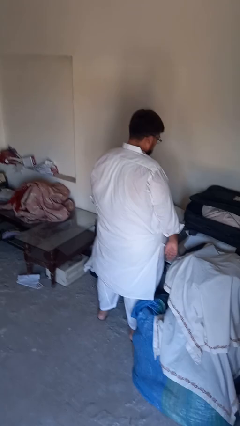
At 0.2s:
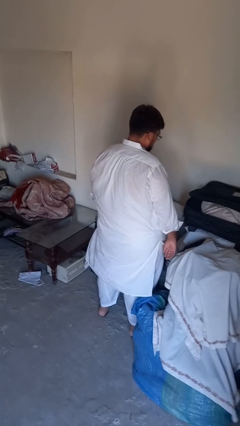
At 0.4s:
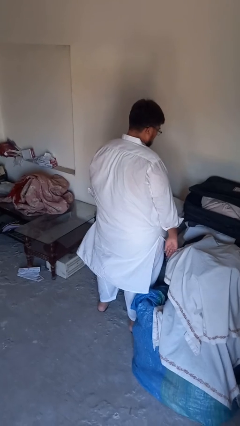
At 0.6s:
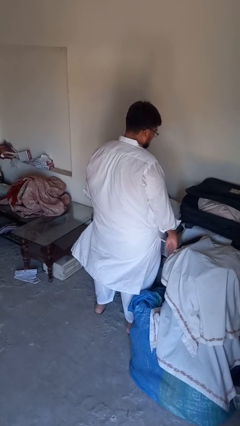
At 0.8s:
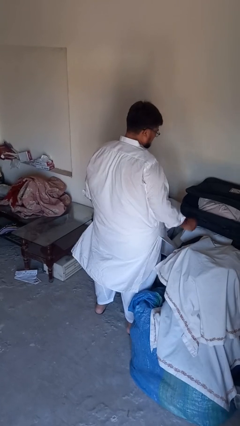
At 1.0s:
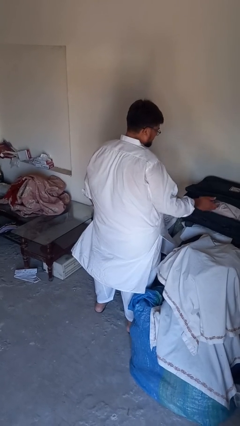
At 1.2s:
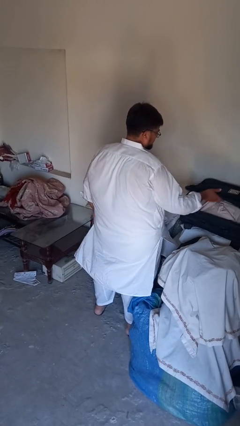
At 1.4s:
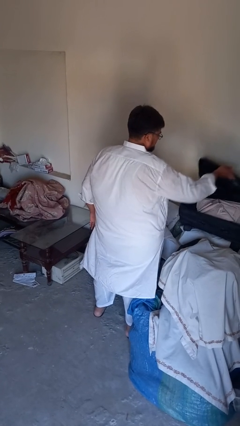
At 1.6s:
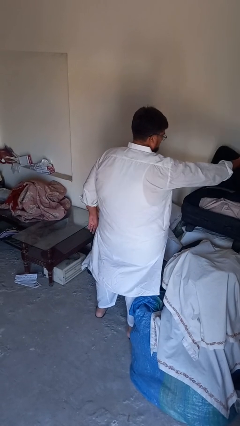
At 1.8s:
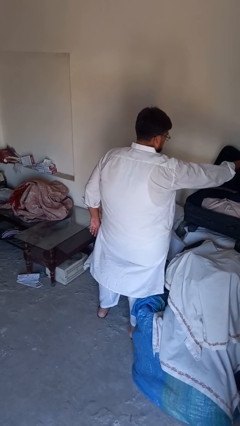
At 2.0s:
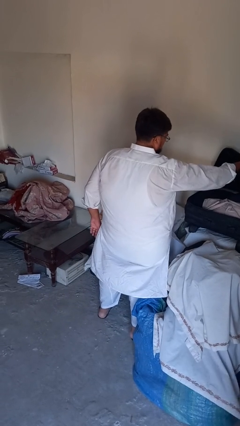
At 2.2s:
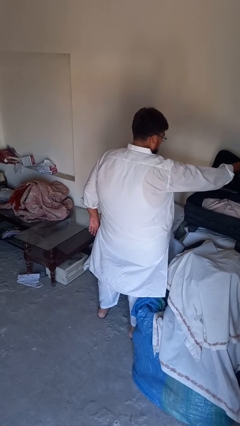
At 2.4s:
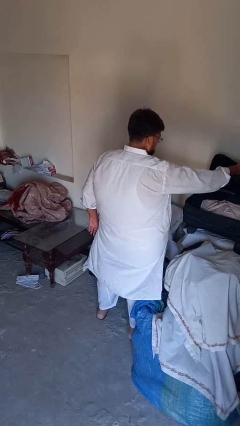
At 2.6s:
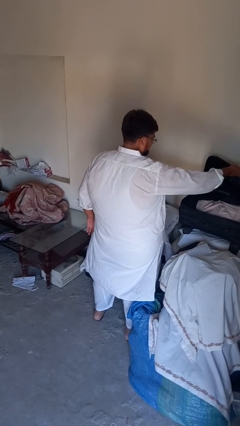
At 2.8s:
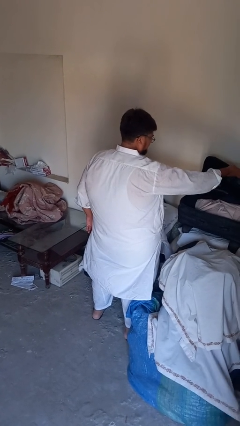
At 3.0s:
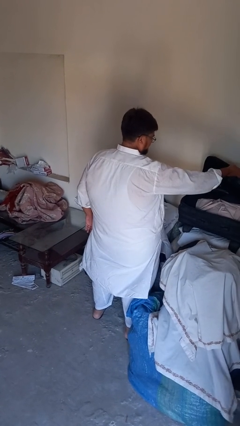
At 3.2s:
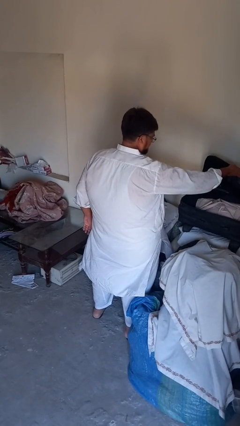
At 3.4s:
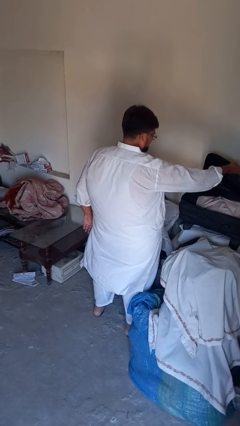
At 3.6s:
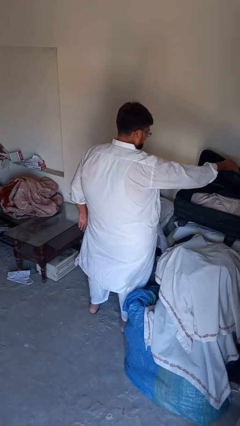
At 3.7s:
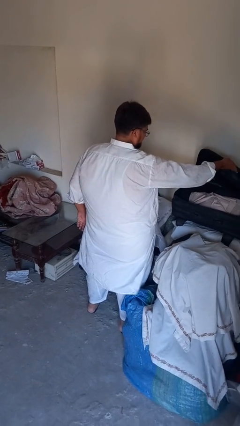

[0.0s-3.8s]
person opens suitcase

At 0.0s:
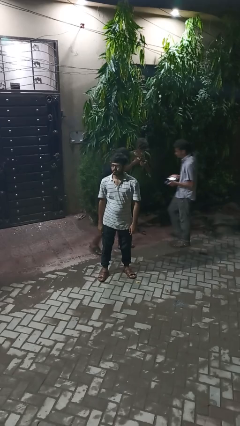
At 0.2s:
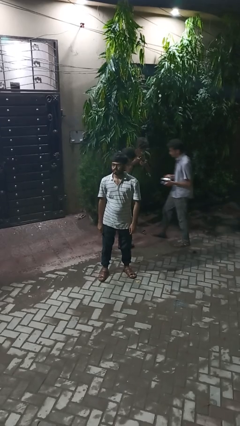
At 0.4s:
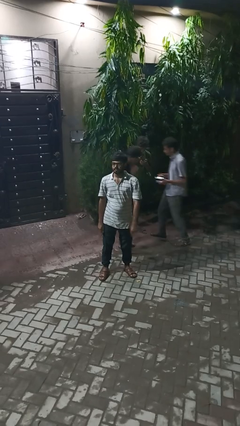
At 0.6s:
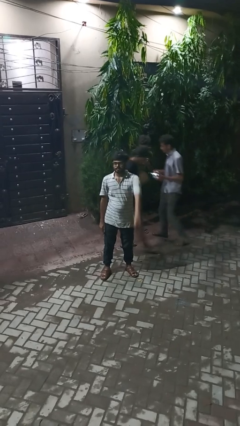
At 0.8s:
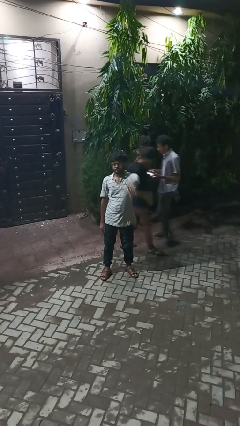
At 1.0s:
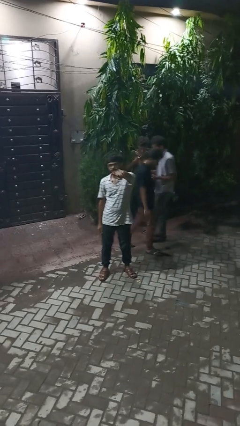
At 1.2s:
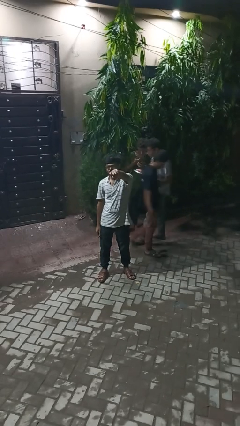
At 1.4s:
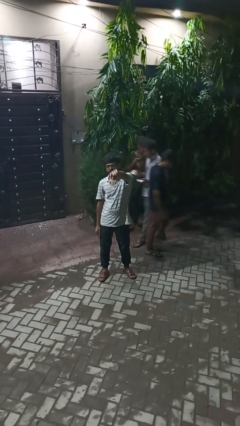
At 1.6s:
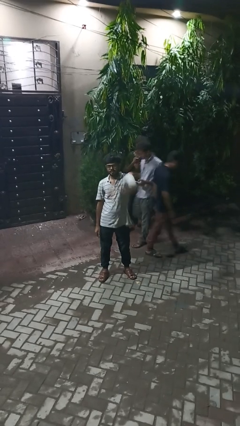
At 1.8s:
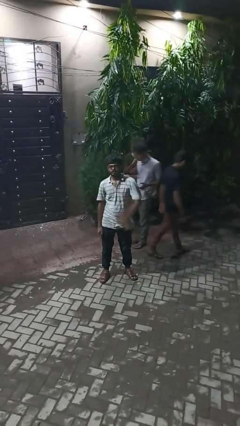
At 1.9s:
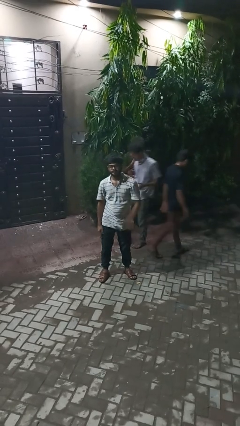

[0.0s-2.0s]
person points at person

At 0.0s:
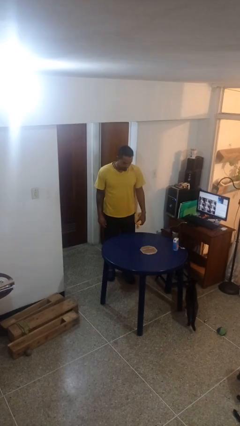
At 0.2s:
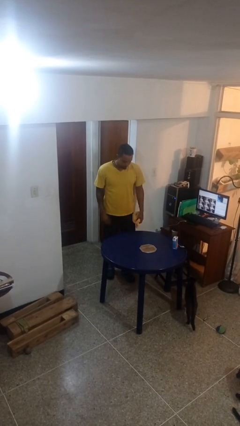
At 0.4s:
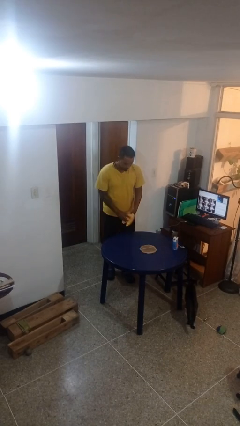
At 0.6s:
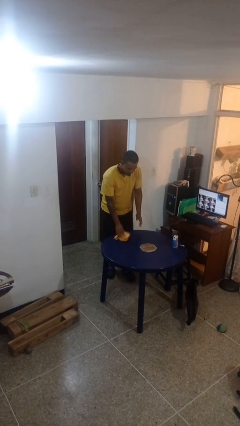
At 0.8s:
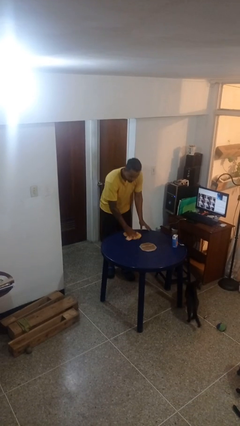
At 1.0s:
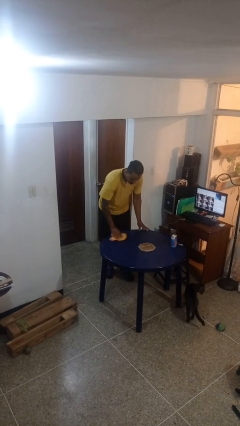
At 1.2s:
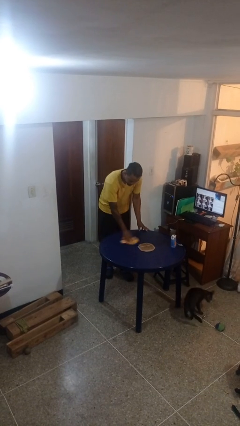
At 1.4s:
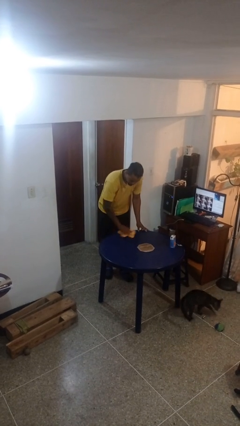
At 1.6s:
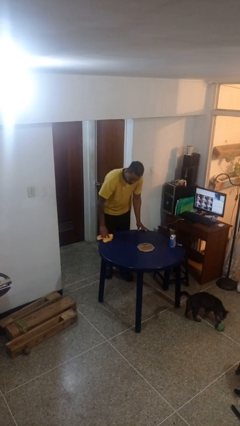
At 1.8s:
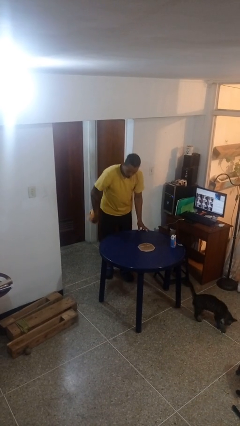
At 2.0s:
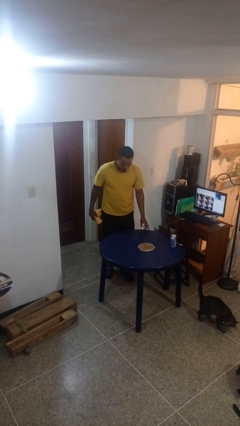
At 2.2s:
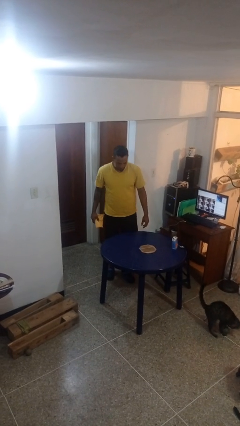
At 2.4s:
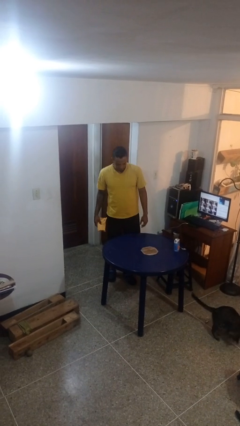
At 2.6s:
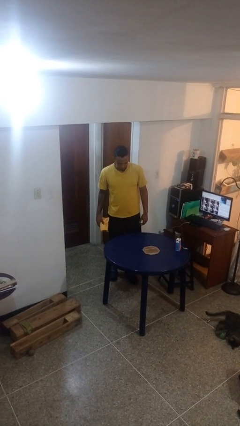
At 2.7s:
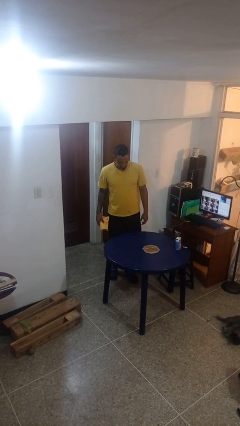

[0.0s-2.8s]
person cleans table with rag

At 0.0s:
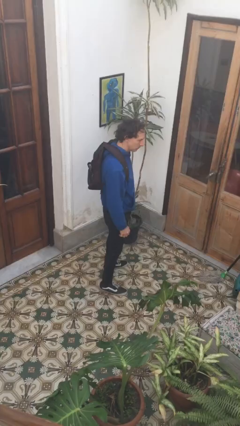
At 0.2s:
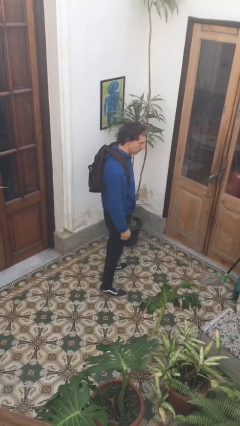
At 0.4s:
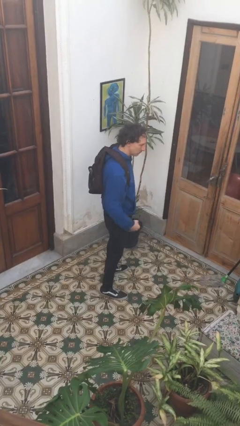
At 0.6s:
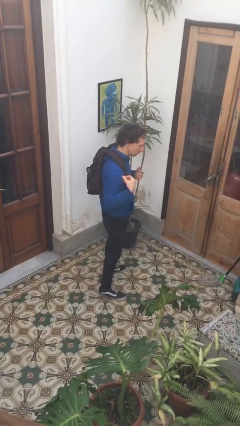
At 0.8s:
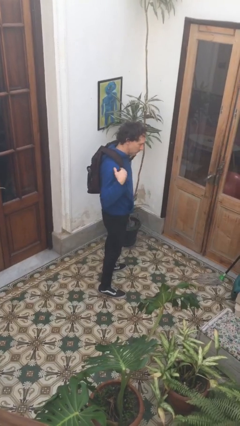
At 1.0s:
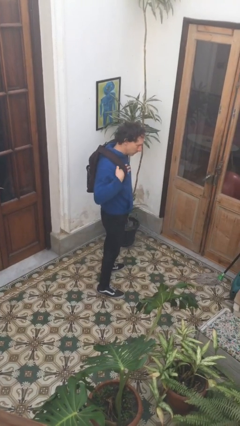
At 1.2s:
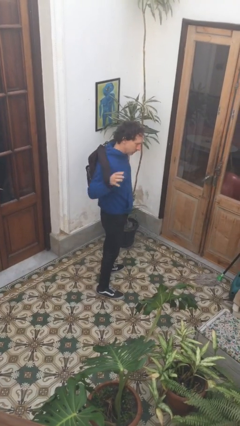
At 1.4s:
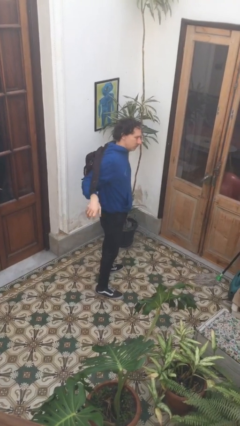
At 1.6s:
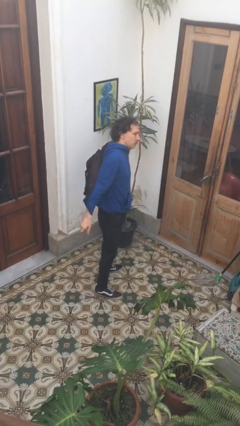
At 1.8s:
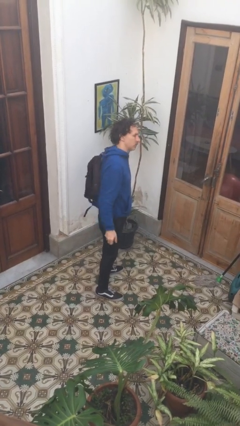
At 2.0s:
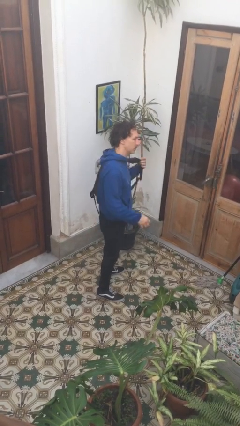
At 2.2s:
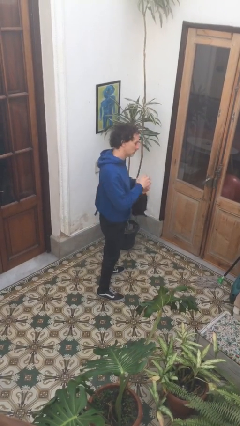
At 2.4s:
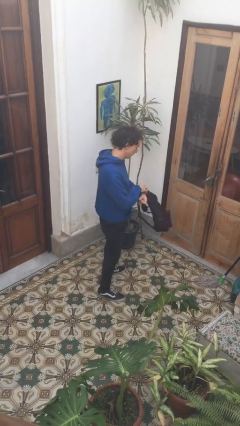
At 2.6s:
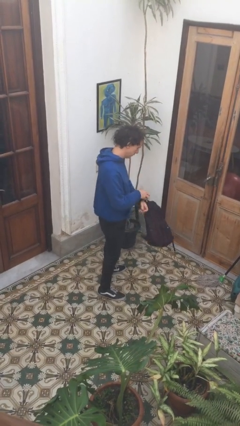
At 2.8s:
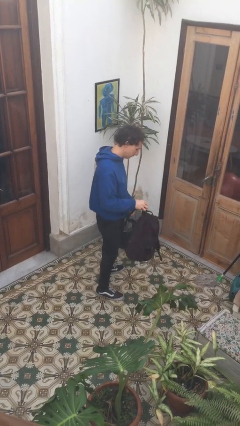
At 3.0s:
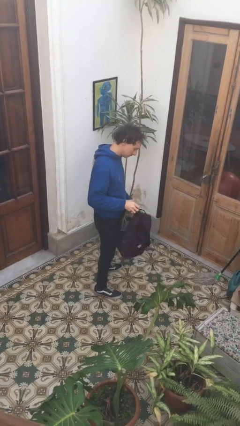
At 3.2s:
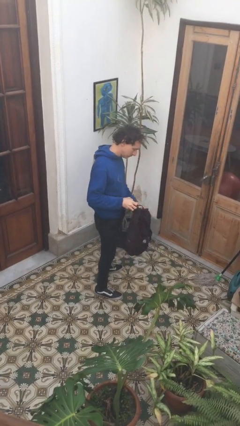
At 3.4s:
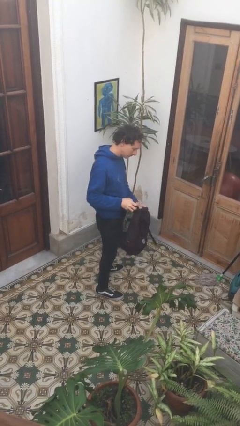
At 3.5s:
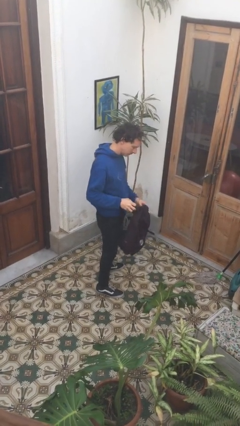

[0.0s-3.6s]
person takes off backpack

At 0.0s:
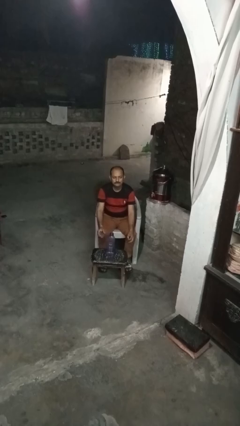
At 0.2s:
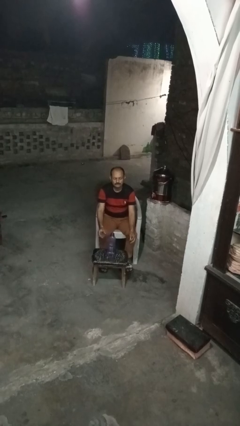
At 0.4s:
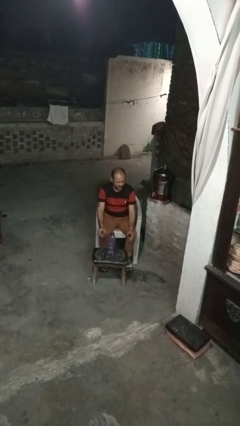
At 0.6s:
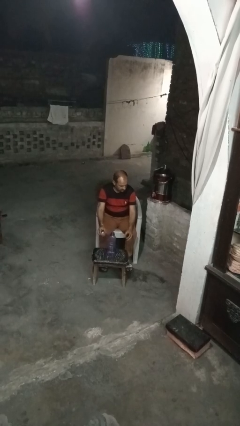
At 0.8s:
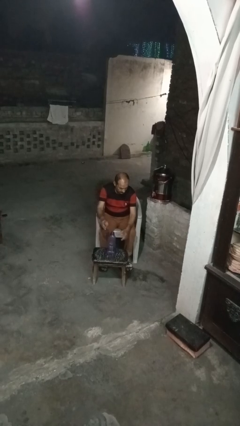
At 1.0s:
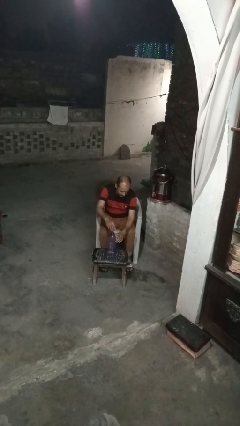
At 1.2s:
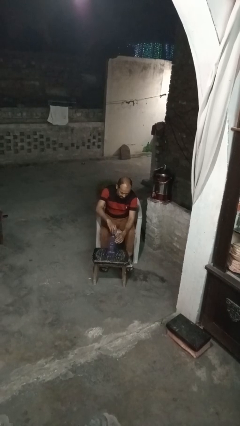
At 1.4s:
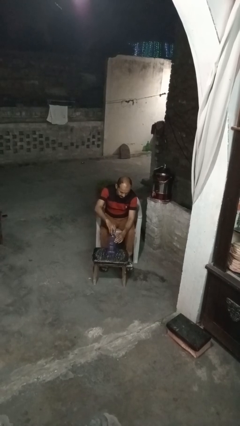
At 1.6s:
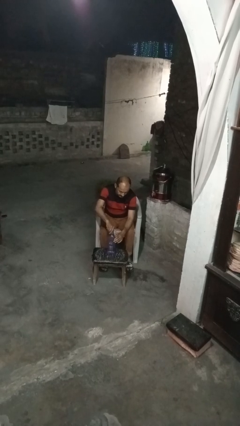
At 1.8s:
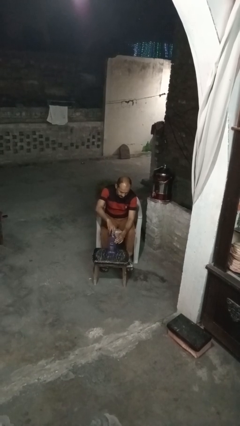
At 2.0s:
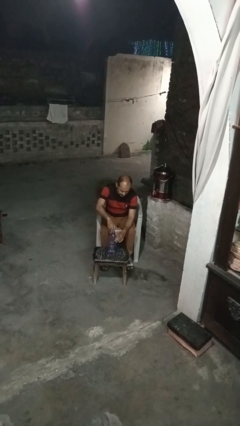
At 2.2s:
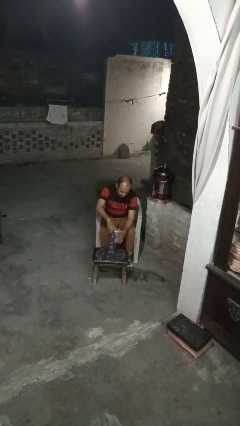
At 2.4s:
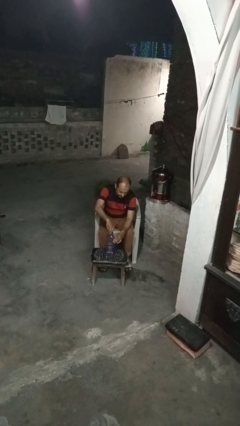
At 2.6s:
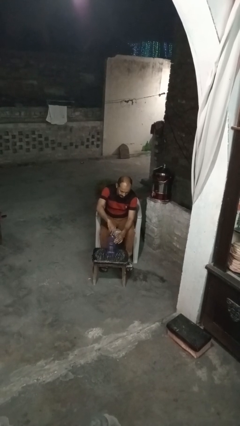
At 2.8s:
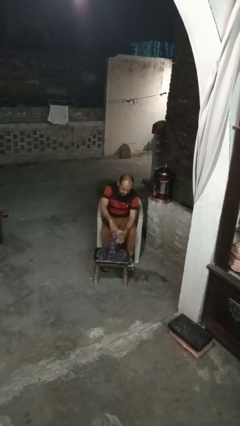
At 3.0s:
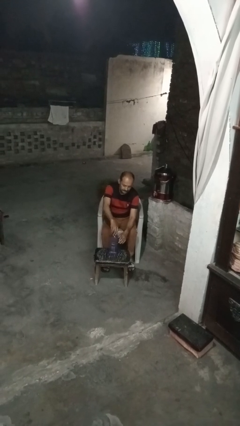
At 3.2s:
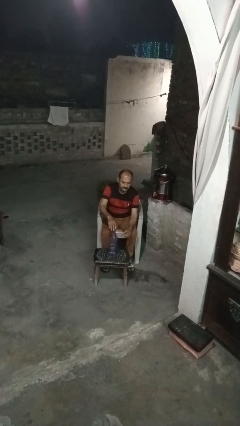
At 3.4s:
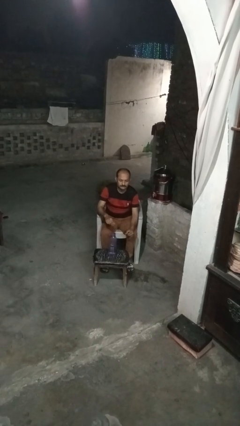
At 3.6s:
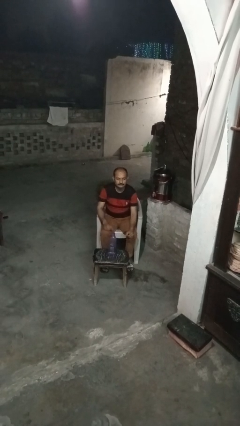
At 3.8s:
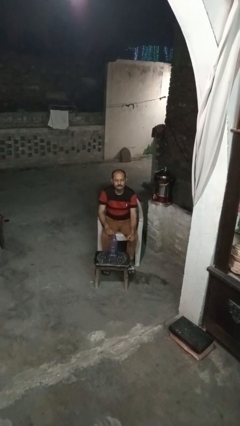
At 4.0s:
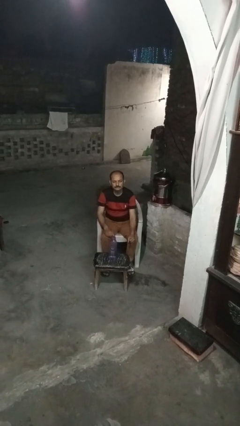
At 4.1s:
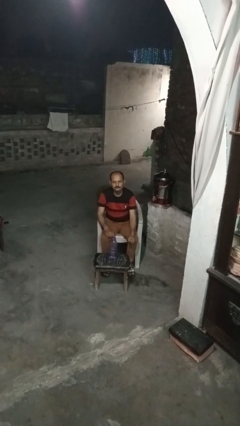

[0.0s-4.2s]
person screws lid to bottle

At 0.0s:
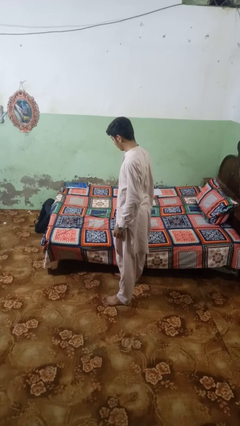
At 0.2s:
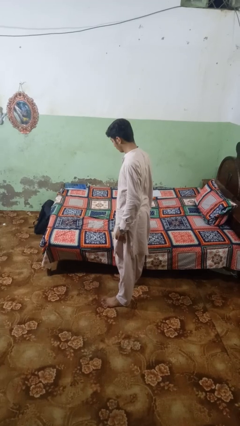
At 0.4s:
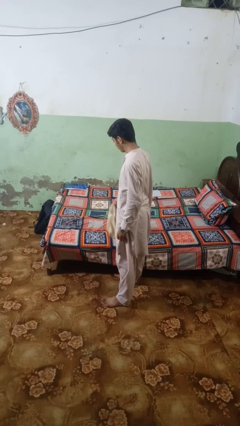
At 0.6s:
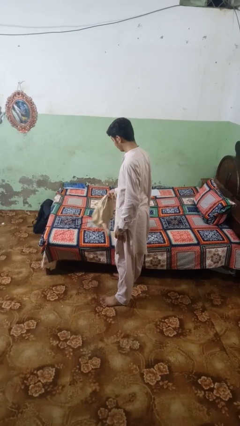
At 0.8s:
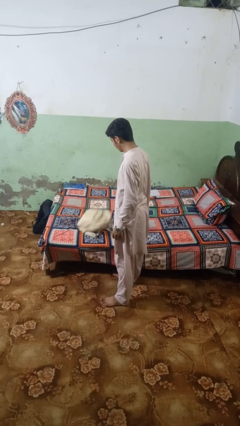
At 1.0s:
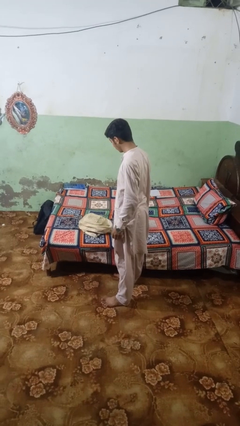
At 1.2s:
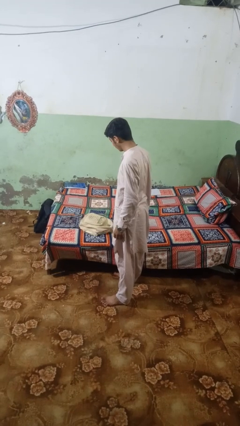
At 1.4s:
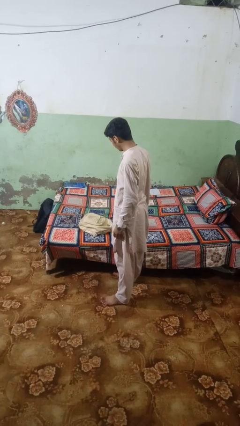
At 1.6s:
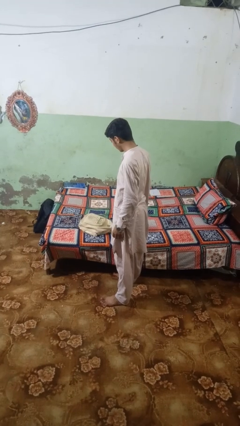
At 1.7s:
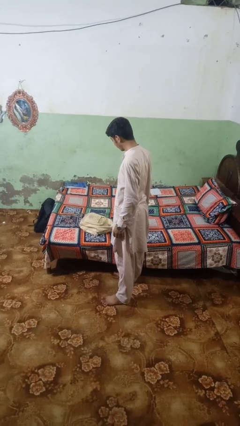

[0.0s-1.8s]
person puts down object on bed
